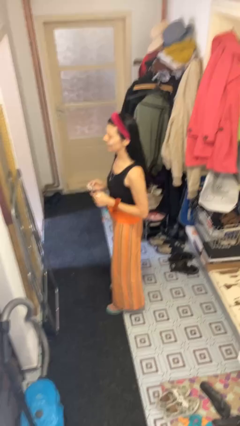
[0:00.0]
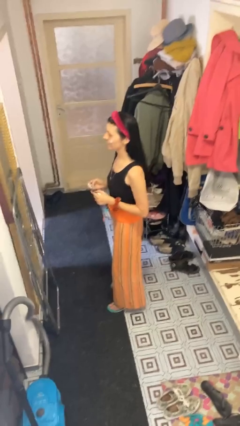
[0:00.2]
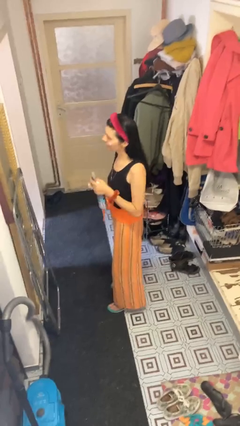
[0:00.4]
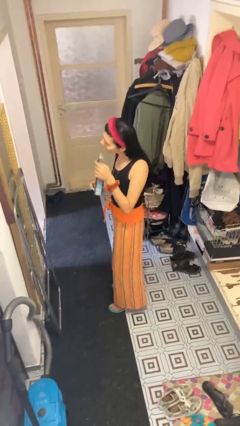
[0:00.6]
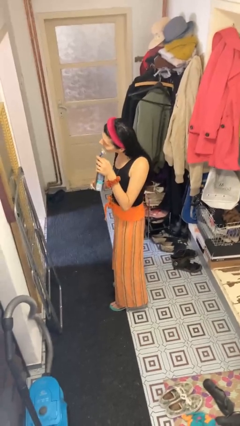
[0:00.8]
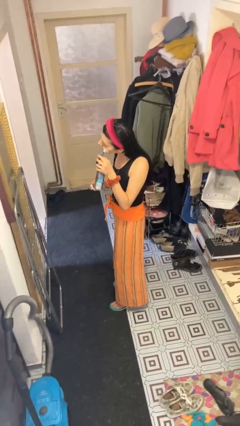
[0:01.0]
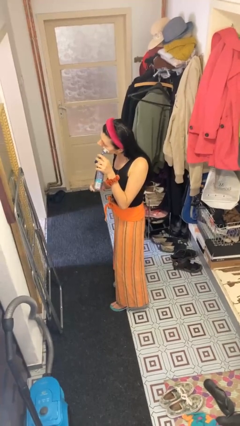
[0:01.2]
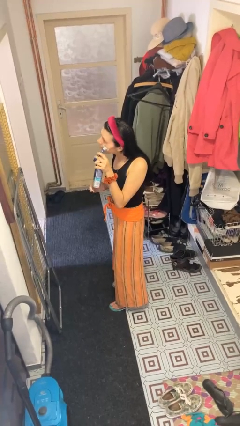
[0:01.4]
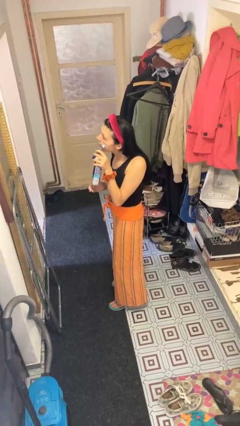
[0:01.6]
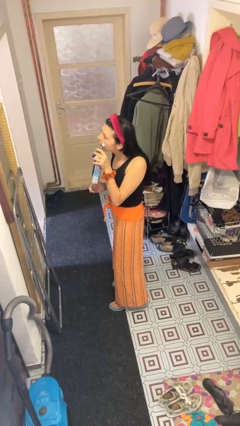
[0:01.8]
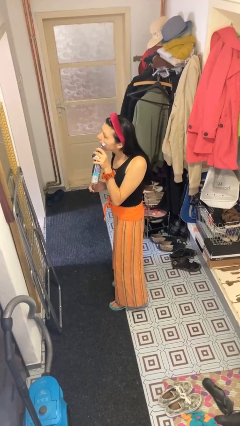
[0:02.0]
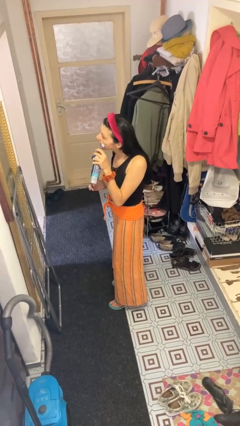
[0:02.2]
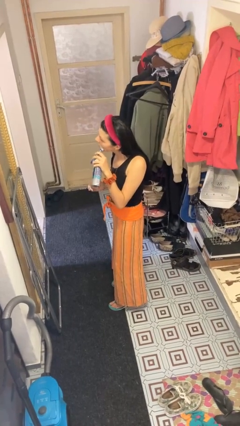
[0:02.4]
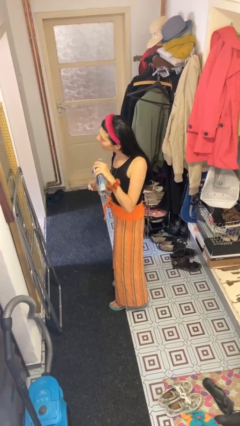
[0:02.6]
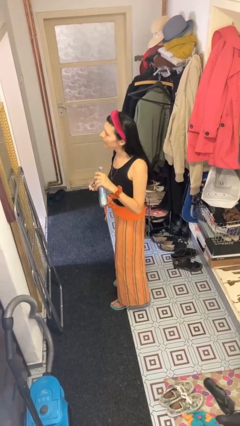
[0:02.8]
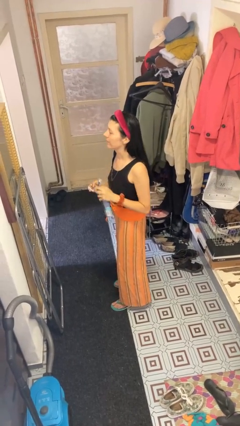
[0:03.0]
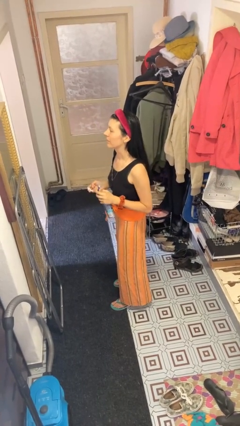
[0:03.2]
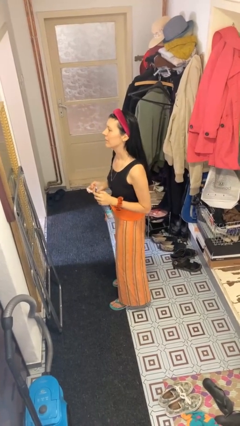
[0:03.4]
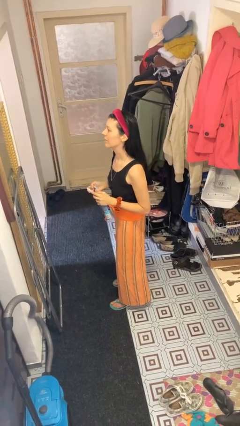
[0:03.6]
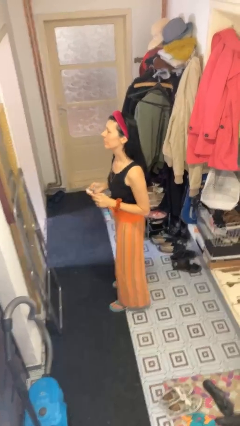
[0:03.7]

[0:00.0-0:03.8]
person shaves face

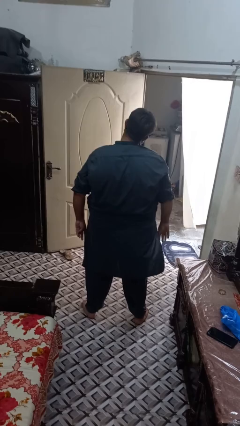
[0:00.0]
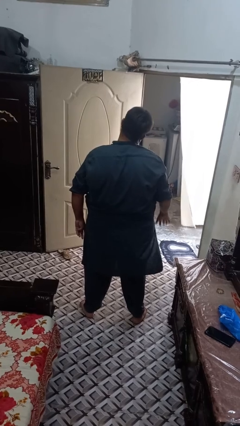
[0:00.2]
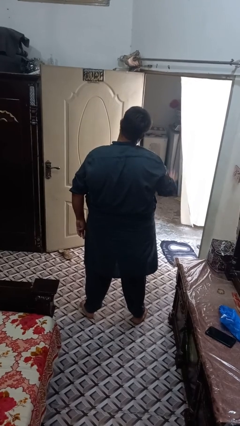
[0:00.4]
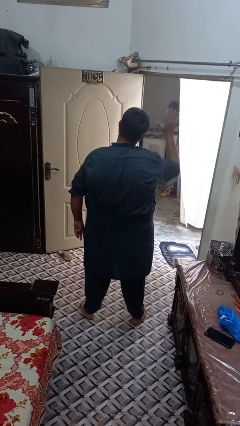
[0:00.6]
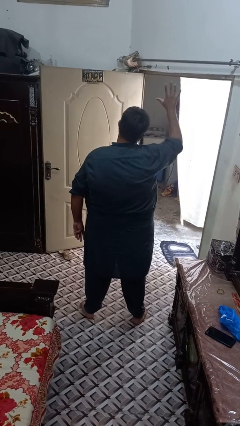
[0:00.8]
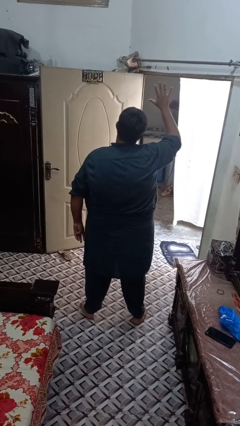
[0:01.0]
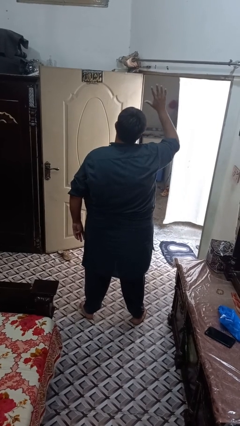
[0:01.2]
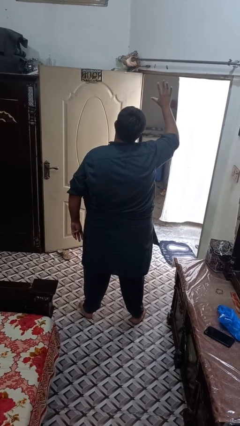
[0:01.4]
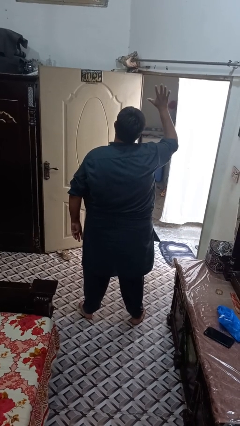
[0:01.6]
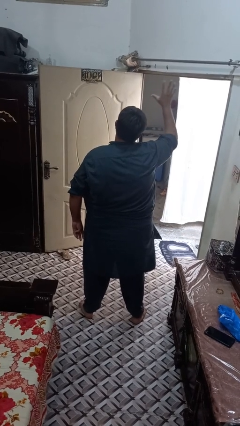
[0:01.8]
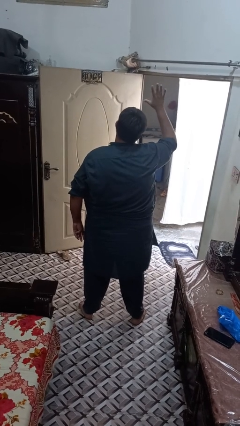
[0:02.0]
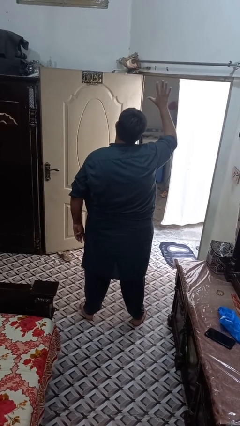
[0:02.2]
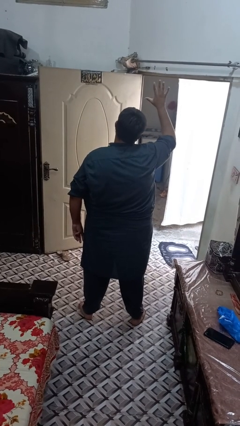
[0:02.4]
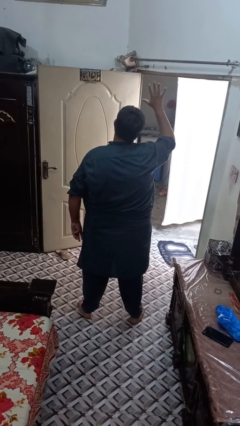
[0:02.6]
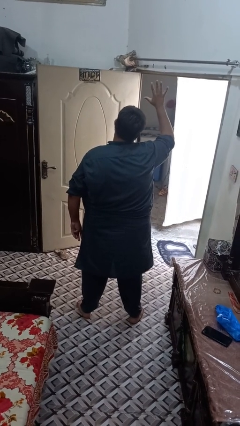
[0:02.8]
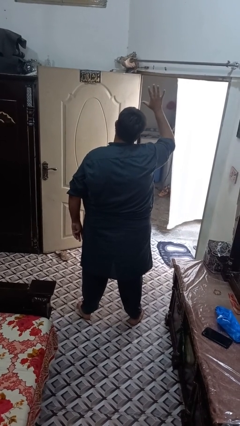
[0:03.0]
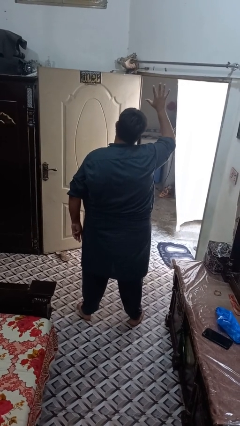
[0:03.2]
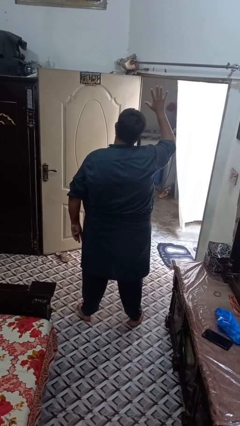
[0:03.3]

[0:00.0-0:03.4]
person gestures number five

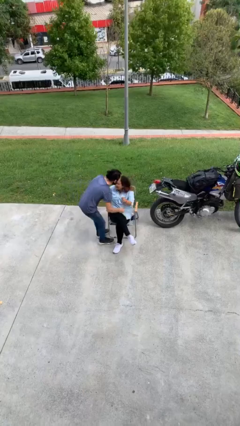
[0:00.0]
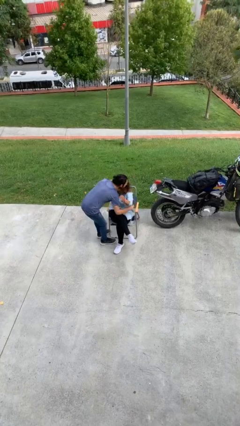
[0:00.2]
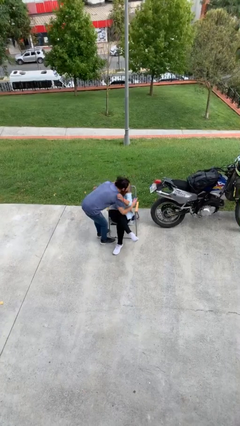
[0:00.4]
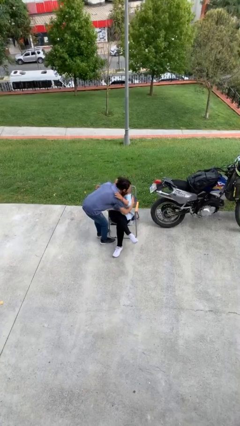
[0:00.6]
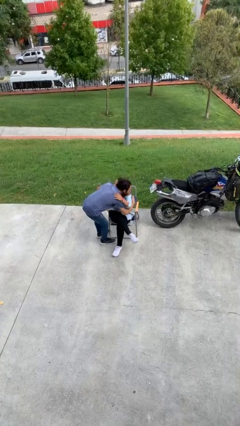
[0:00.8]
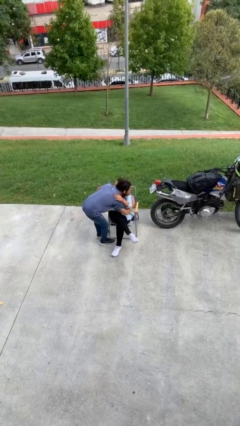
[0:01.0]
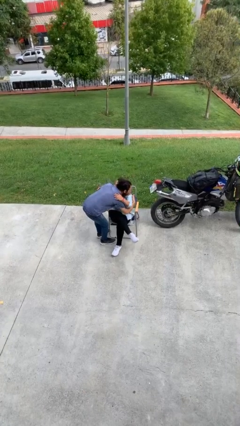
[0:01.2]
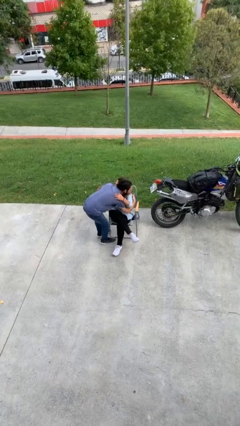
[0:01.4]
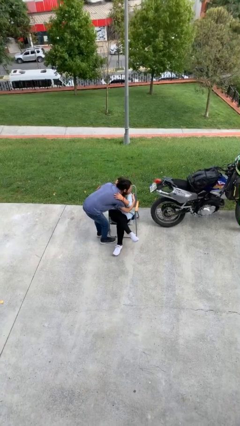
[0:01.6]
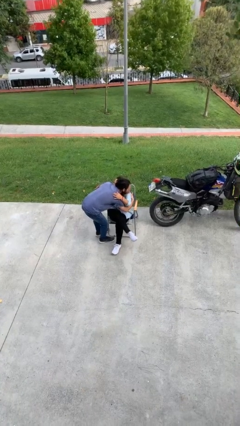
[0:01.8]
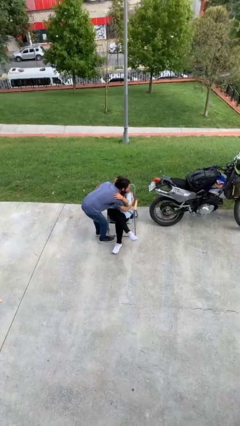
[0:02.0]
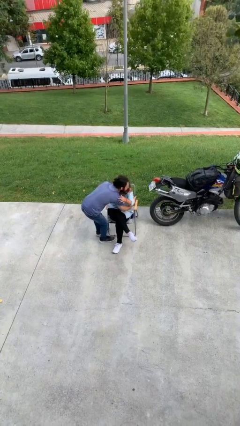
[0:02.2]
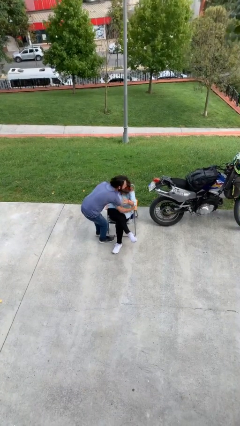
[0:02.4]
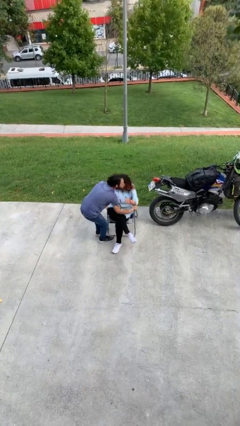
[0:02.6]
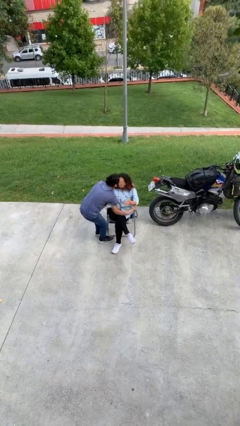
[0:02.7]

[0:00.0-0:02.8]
person embraces person

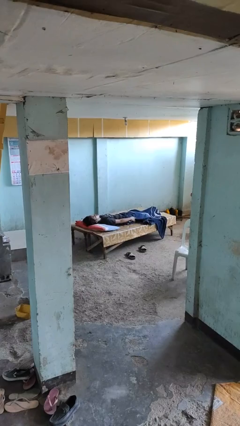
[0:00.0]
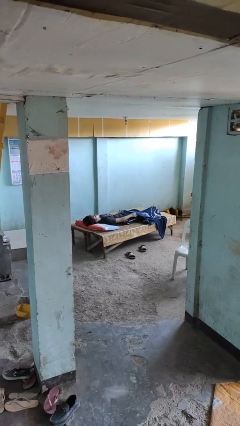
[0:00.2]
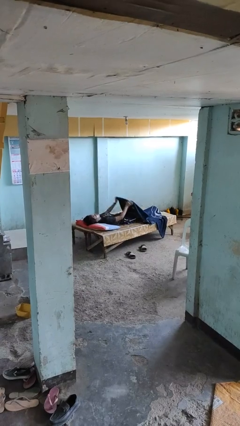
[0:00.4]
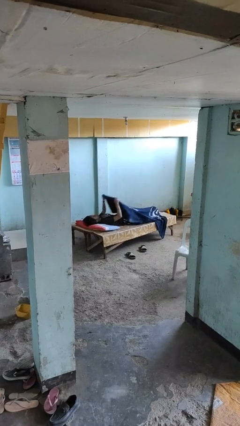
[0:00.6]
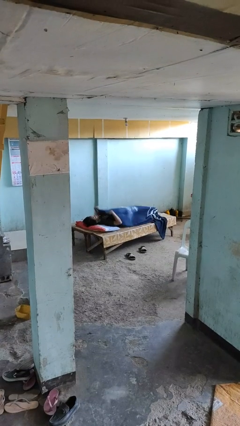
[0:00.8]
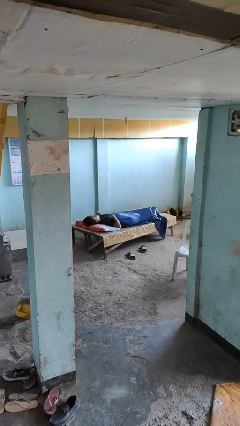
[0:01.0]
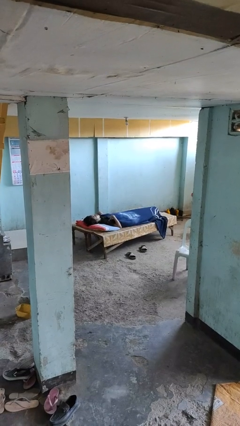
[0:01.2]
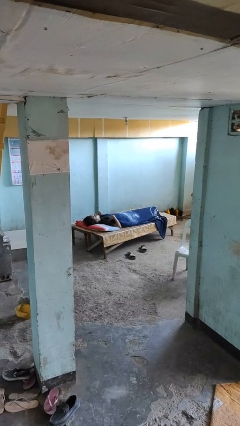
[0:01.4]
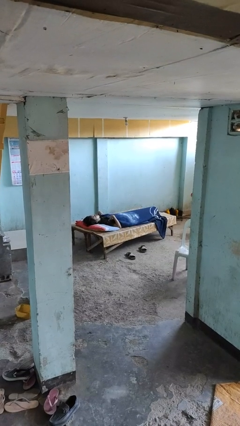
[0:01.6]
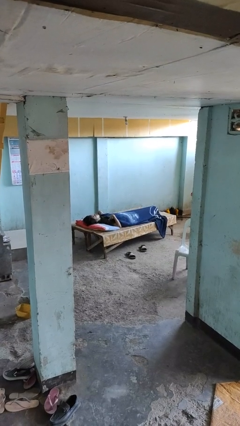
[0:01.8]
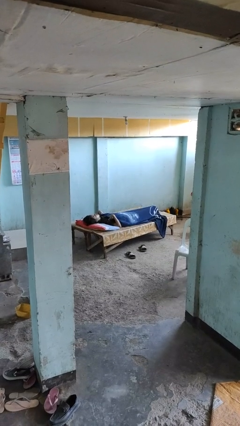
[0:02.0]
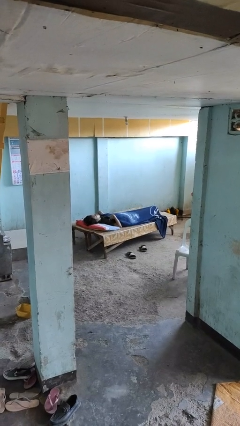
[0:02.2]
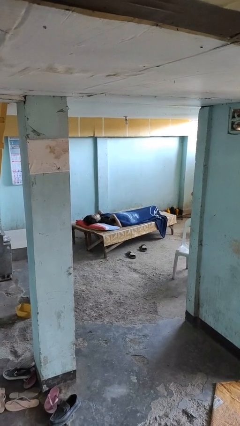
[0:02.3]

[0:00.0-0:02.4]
person covers with blanket

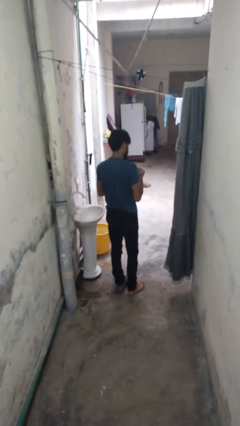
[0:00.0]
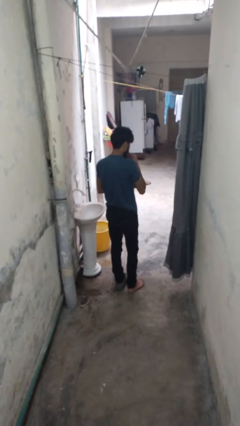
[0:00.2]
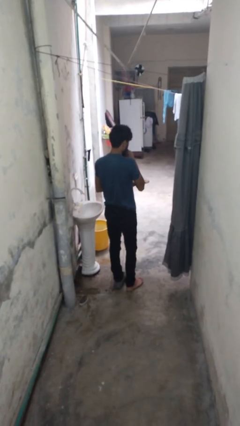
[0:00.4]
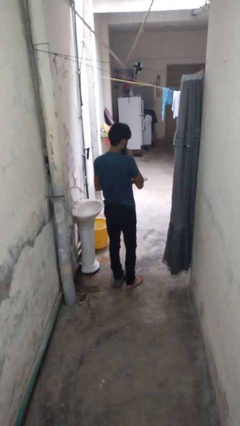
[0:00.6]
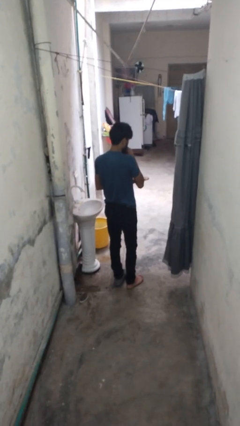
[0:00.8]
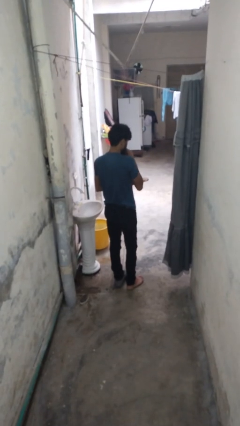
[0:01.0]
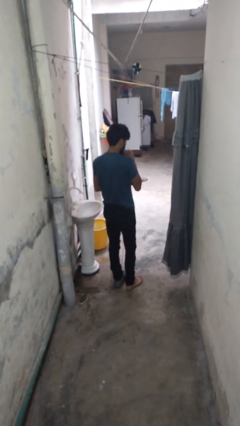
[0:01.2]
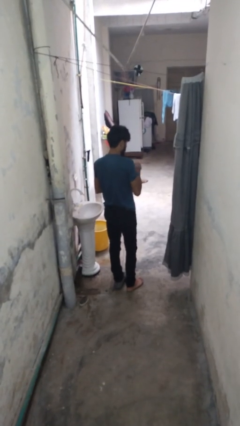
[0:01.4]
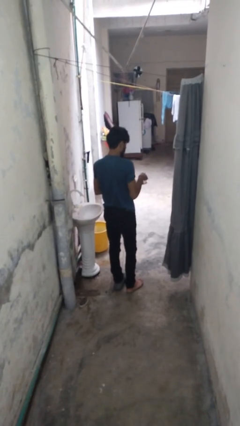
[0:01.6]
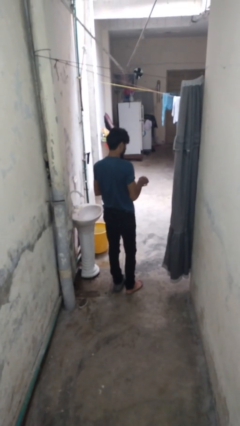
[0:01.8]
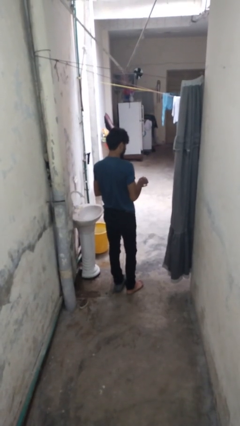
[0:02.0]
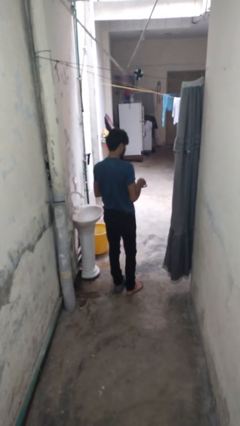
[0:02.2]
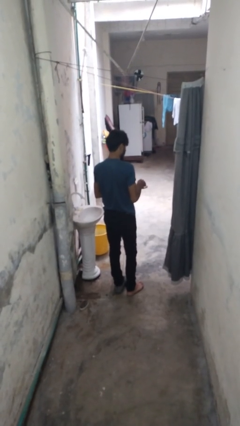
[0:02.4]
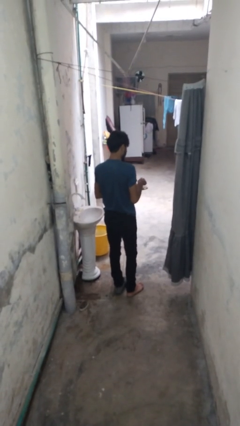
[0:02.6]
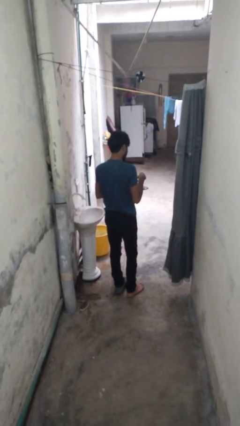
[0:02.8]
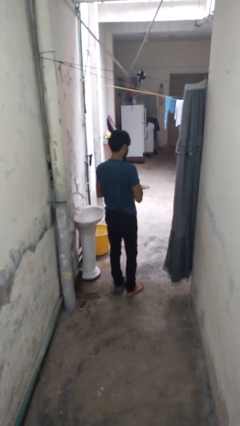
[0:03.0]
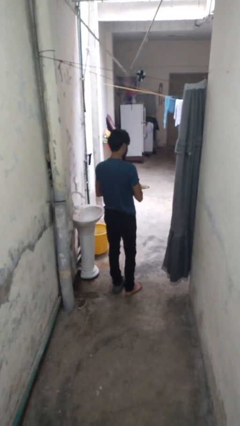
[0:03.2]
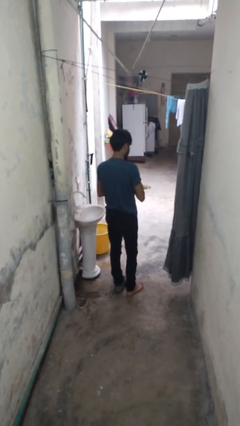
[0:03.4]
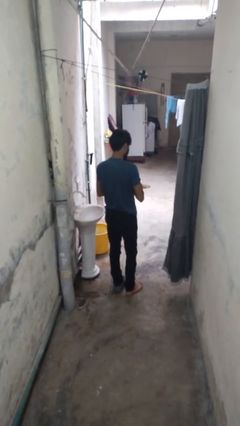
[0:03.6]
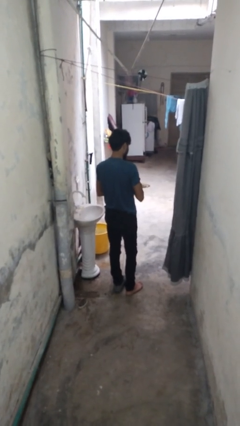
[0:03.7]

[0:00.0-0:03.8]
person eats with hands

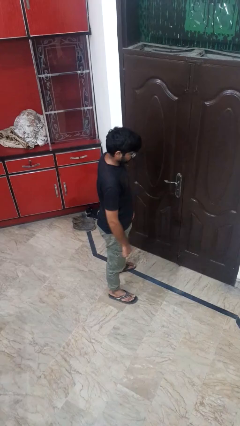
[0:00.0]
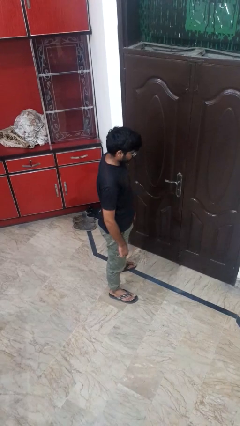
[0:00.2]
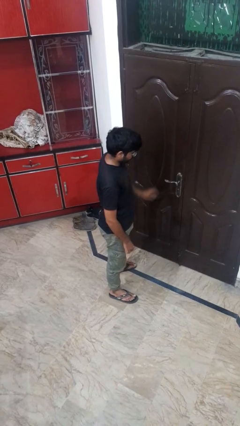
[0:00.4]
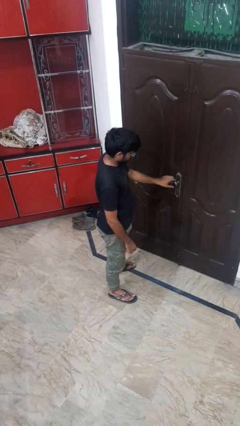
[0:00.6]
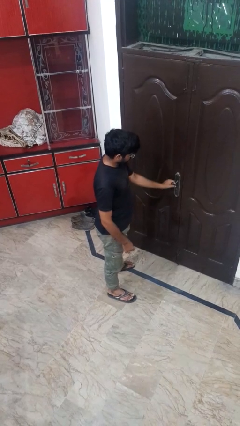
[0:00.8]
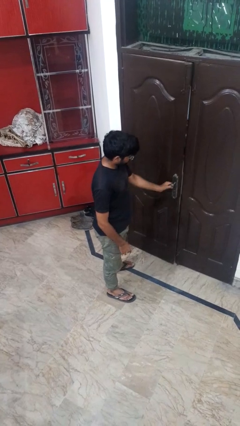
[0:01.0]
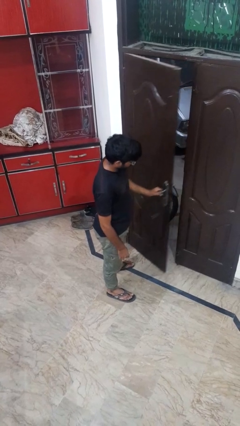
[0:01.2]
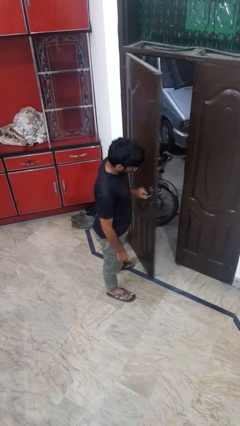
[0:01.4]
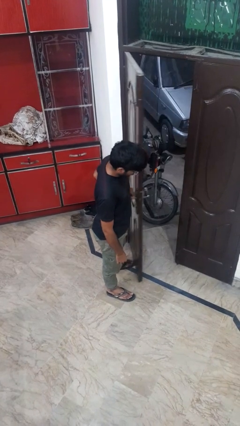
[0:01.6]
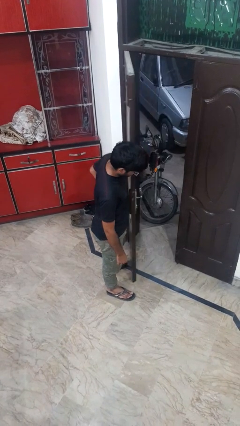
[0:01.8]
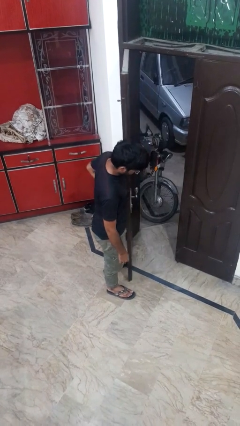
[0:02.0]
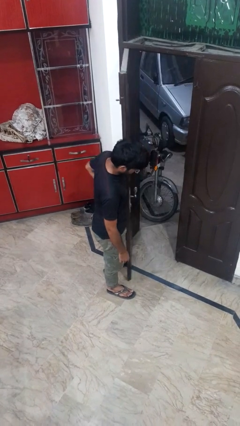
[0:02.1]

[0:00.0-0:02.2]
person opens facility door
